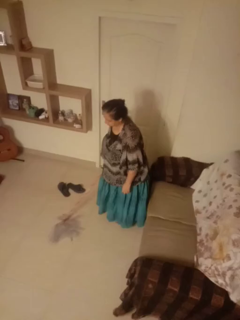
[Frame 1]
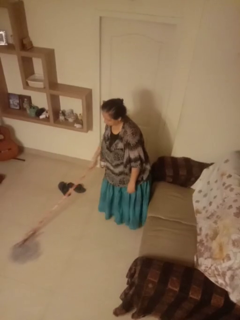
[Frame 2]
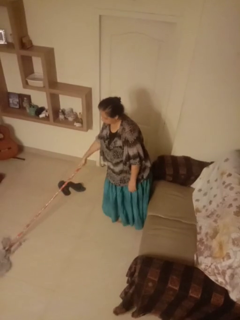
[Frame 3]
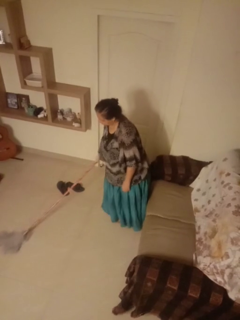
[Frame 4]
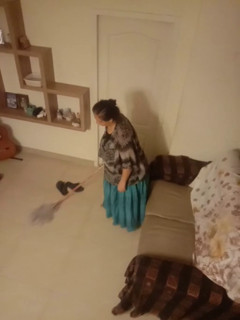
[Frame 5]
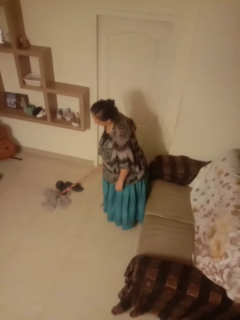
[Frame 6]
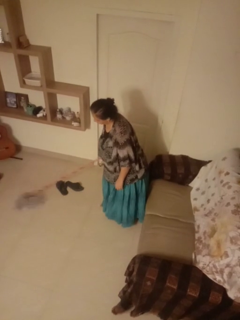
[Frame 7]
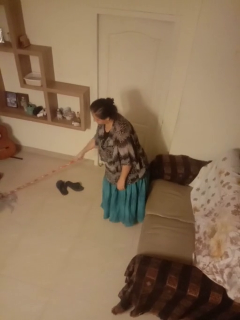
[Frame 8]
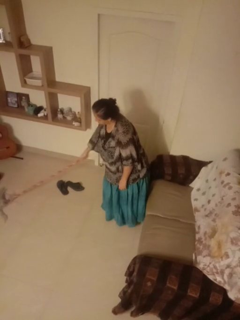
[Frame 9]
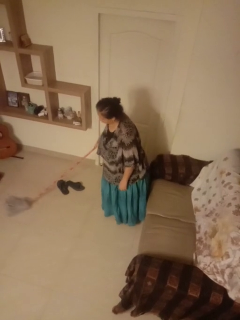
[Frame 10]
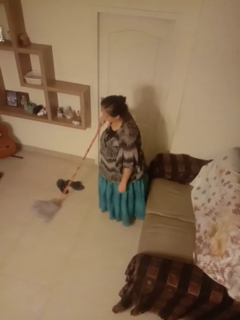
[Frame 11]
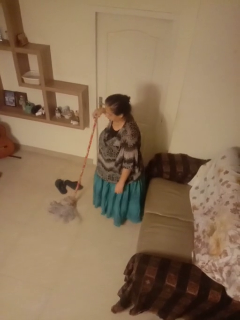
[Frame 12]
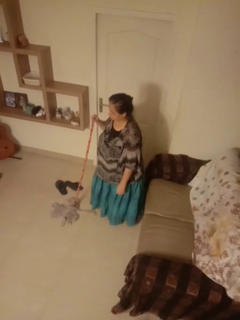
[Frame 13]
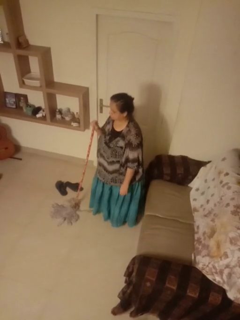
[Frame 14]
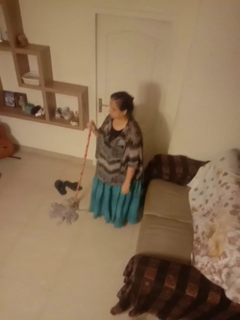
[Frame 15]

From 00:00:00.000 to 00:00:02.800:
person mops

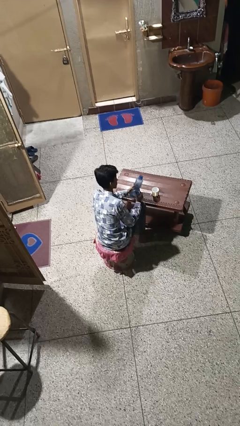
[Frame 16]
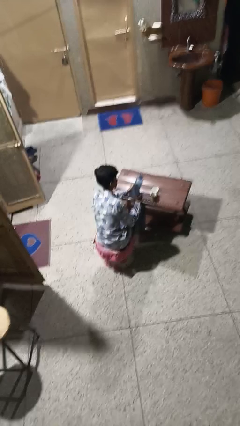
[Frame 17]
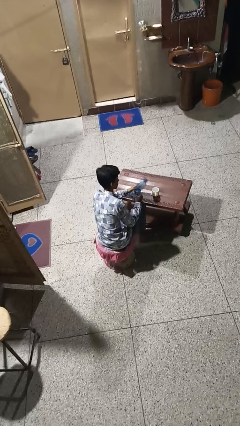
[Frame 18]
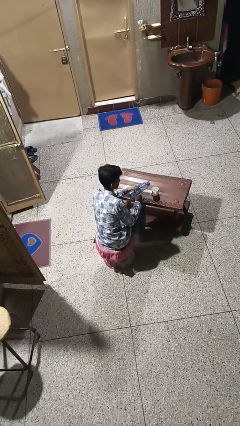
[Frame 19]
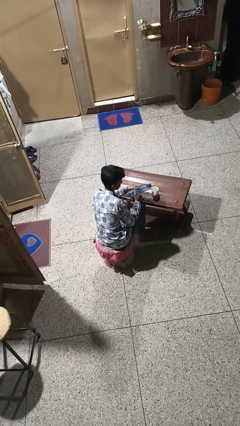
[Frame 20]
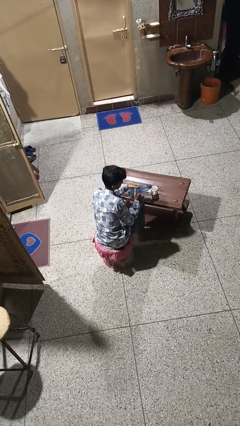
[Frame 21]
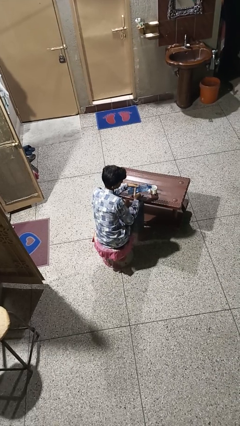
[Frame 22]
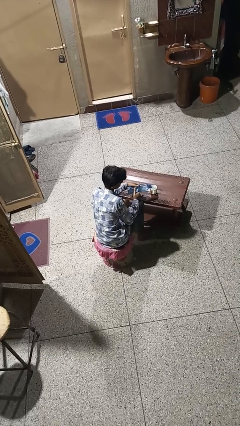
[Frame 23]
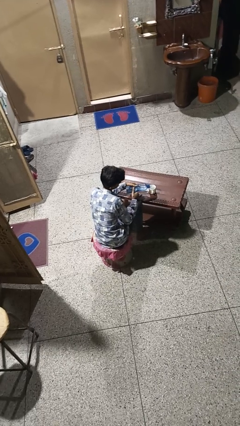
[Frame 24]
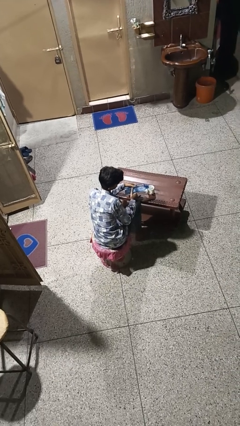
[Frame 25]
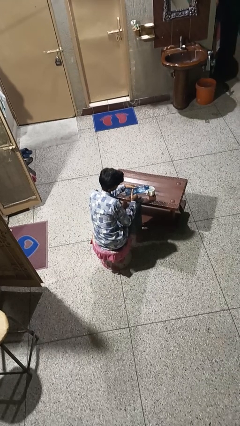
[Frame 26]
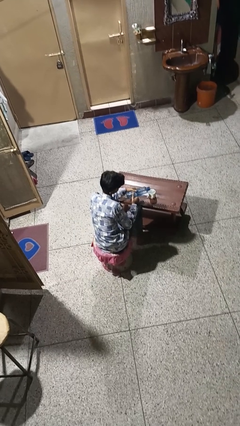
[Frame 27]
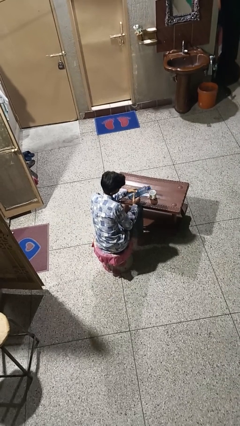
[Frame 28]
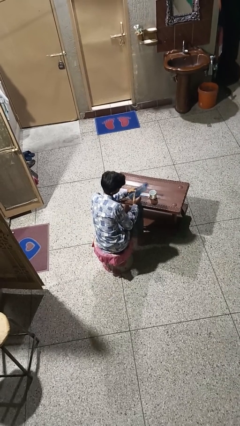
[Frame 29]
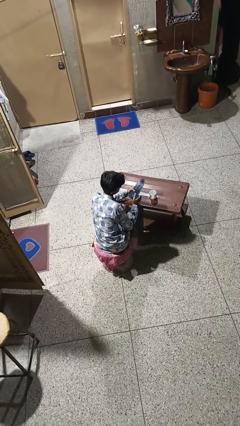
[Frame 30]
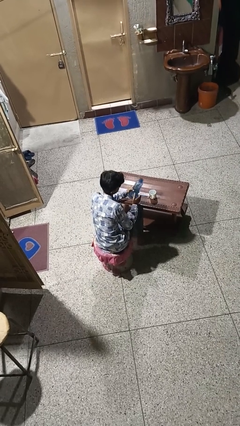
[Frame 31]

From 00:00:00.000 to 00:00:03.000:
person pours liquid into cup

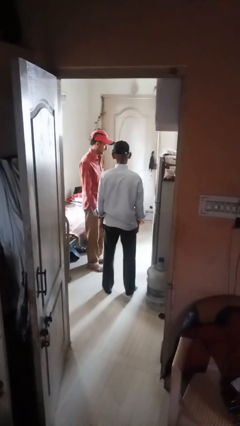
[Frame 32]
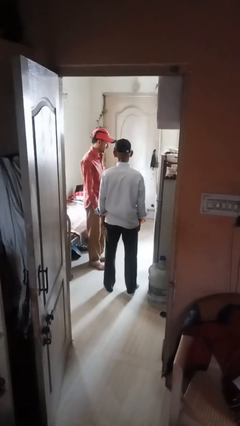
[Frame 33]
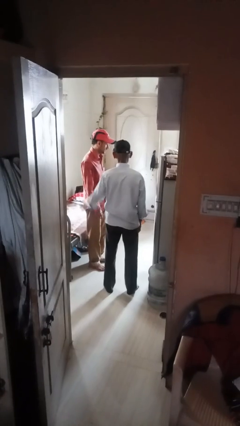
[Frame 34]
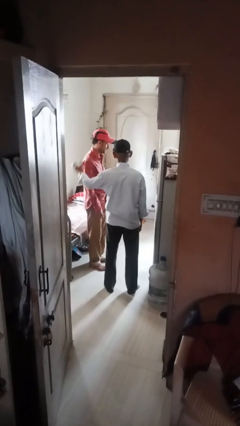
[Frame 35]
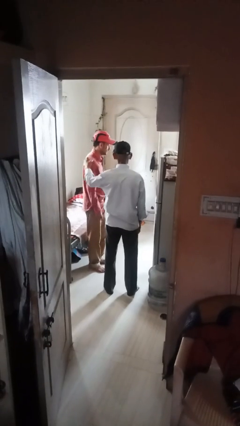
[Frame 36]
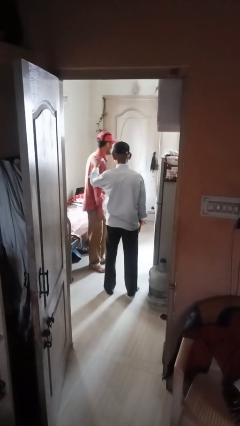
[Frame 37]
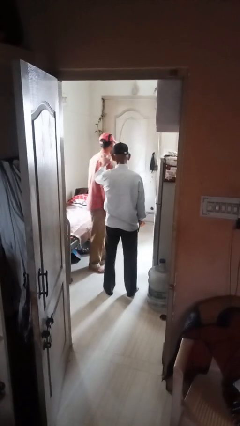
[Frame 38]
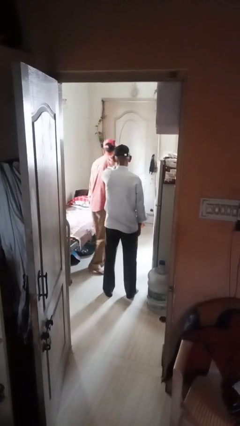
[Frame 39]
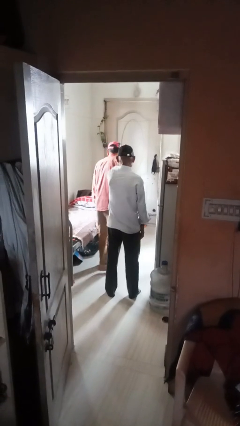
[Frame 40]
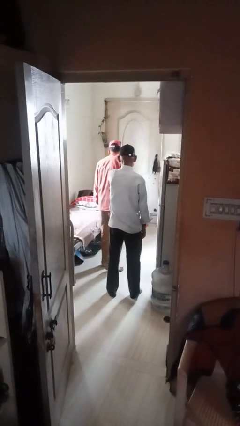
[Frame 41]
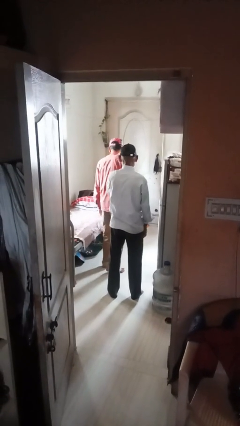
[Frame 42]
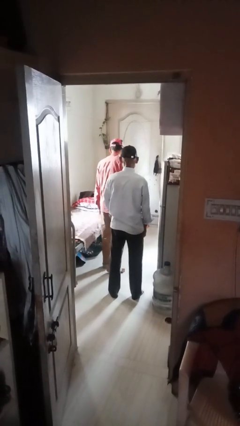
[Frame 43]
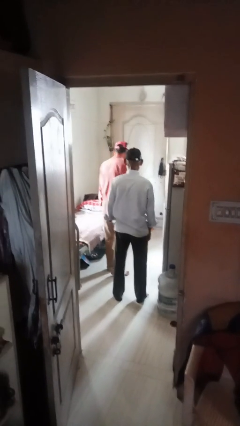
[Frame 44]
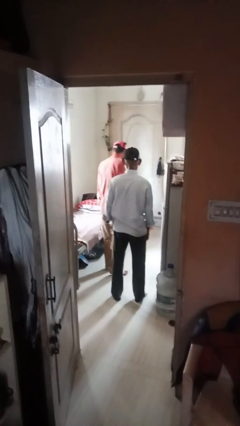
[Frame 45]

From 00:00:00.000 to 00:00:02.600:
person shoves person

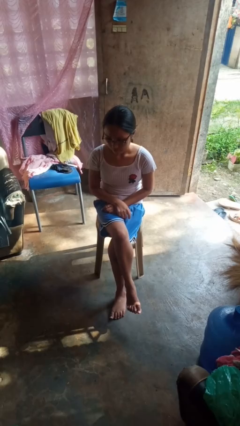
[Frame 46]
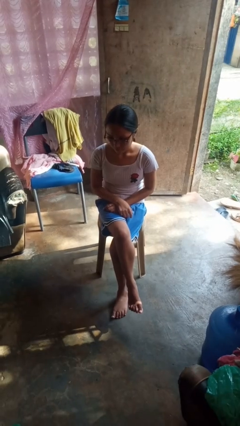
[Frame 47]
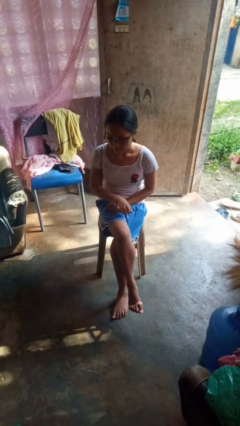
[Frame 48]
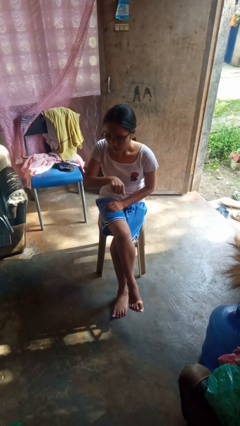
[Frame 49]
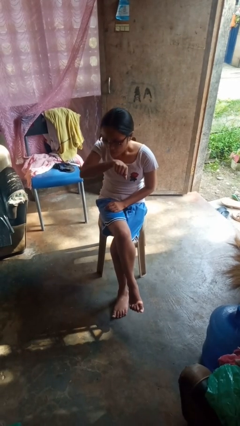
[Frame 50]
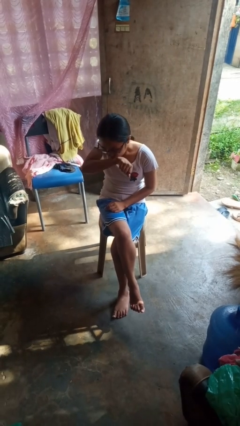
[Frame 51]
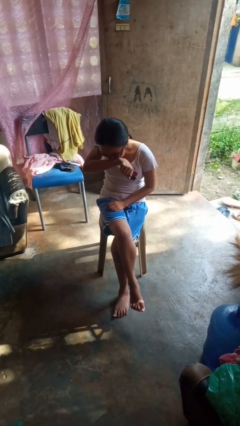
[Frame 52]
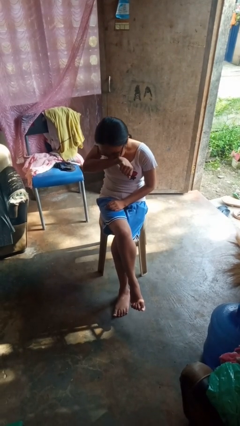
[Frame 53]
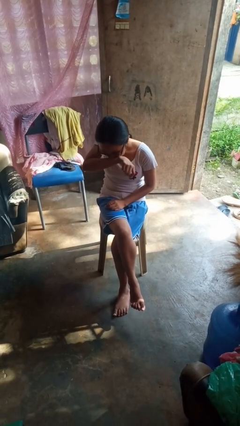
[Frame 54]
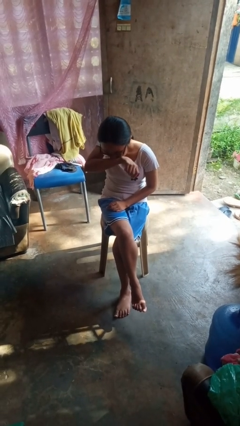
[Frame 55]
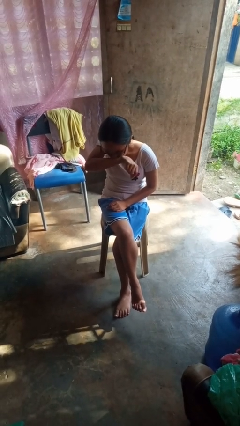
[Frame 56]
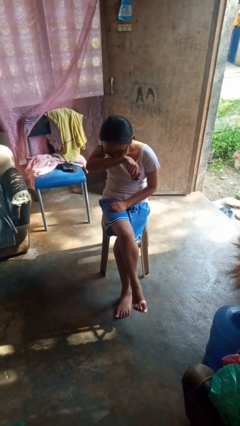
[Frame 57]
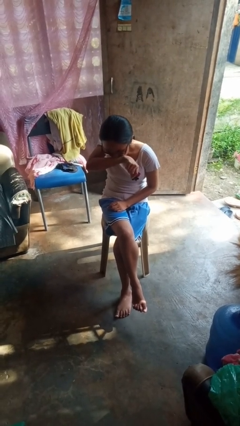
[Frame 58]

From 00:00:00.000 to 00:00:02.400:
person sneezes into arm

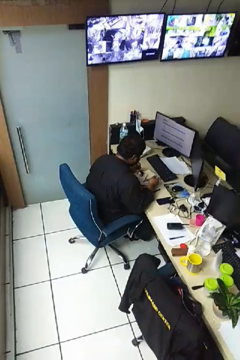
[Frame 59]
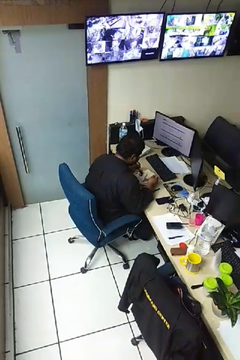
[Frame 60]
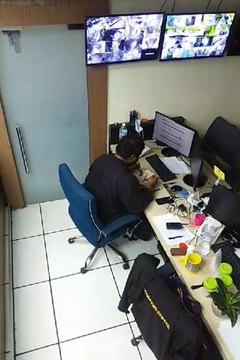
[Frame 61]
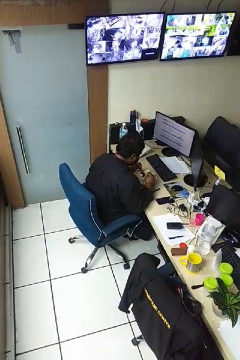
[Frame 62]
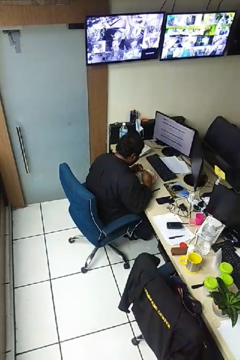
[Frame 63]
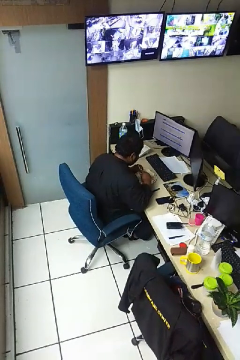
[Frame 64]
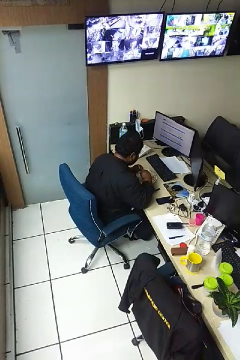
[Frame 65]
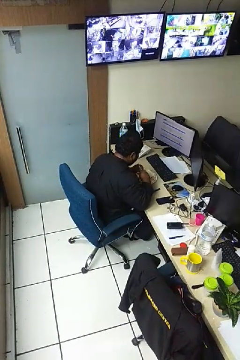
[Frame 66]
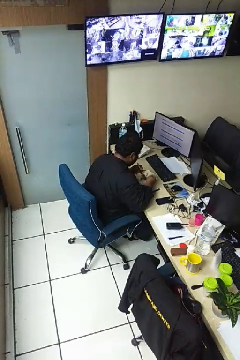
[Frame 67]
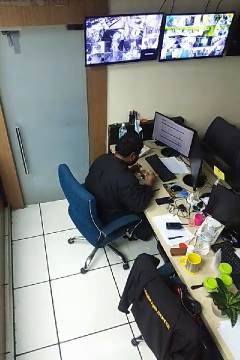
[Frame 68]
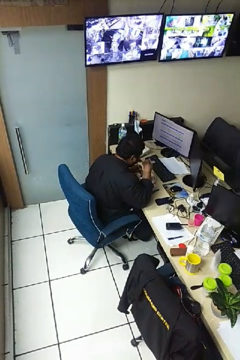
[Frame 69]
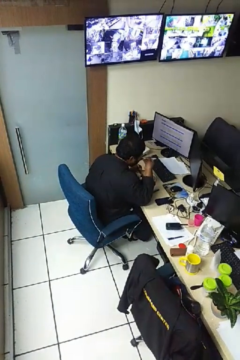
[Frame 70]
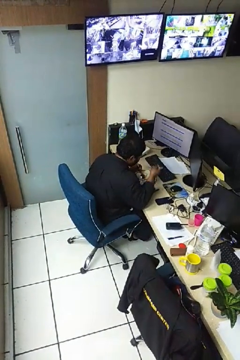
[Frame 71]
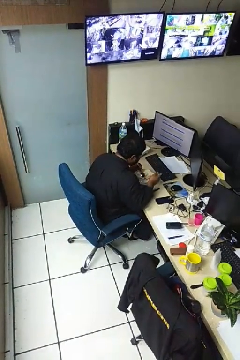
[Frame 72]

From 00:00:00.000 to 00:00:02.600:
person eats with utensil

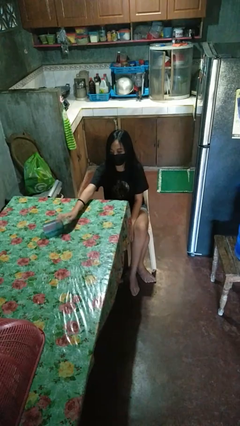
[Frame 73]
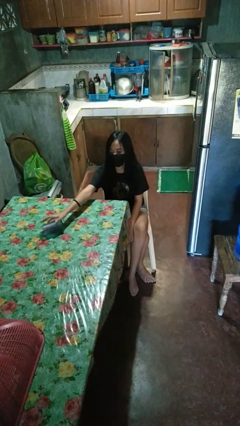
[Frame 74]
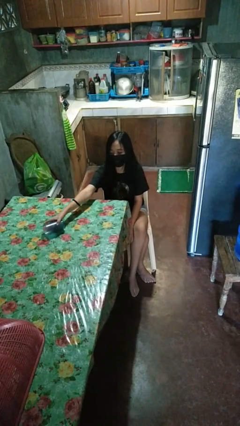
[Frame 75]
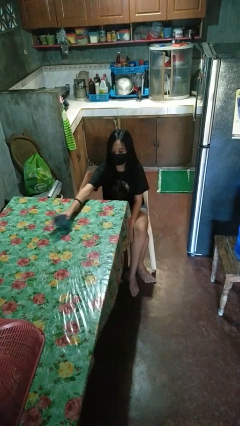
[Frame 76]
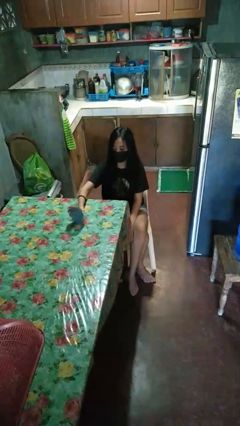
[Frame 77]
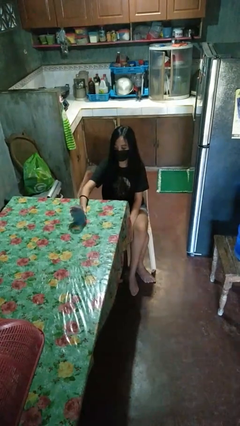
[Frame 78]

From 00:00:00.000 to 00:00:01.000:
person sets upright glass

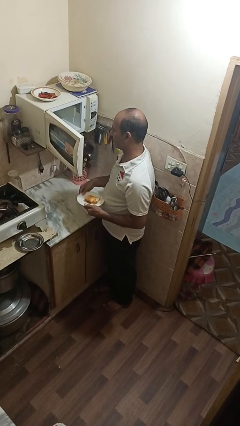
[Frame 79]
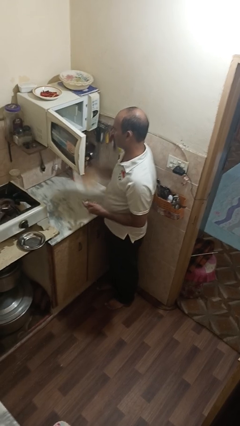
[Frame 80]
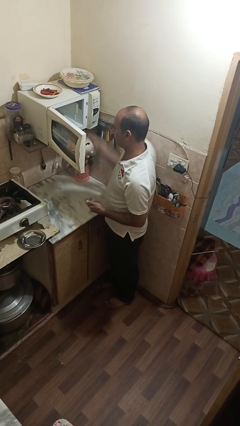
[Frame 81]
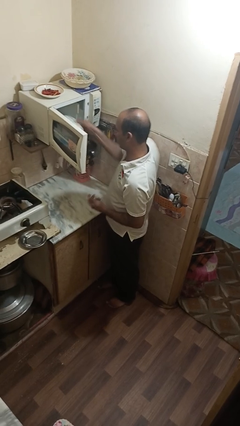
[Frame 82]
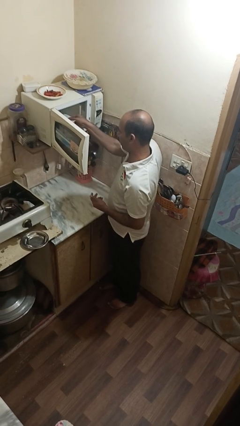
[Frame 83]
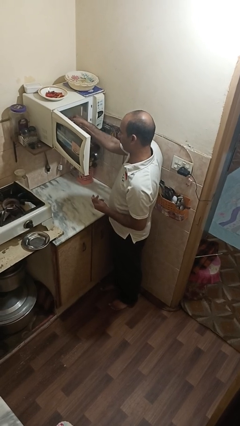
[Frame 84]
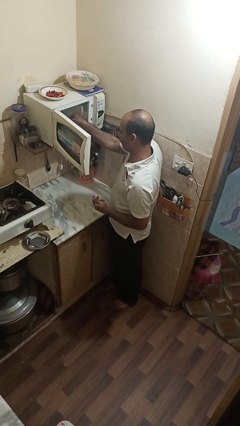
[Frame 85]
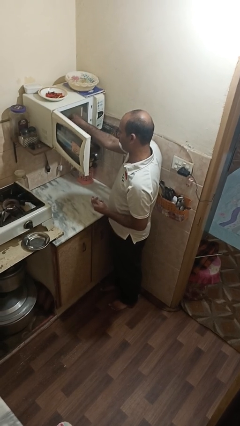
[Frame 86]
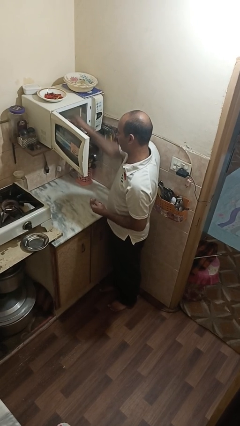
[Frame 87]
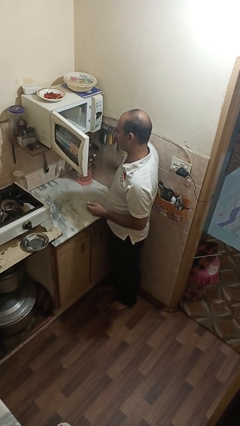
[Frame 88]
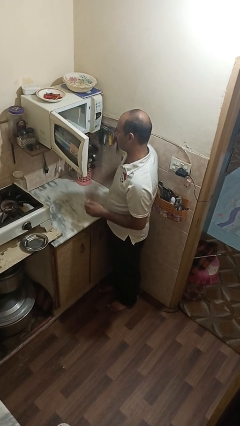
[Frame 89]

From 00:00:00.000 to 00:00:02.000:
person puts object into microwave

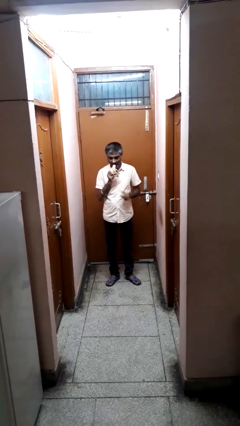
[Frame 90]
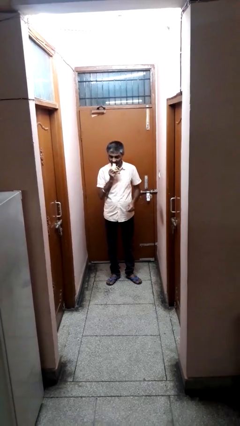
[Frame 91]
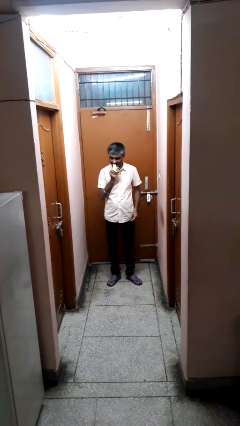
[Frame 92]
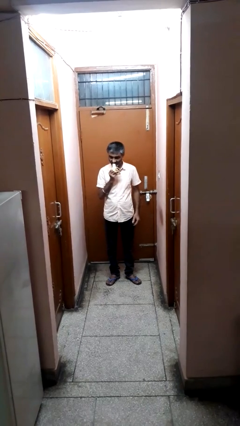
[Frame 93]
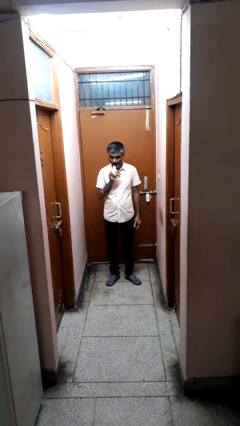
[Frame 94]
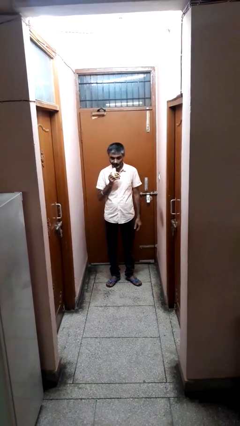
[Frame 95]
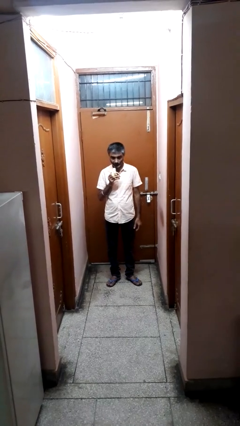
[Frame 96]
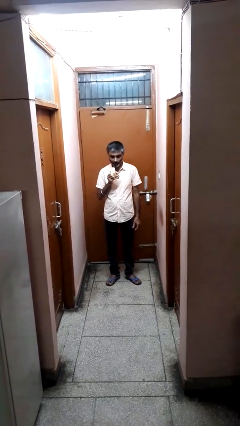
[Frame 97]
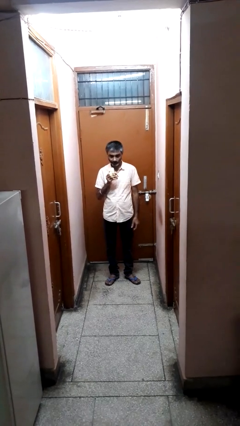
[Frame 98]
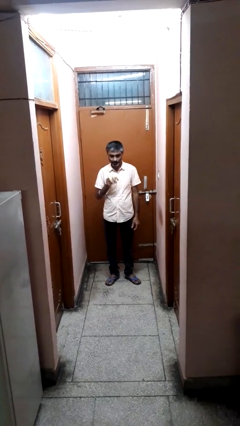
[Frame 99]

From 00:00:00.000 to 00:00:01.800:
person eats banana
